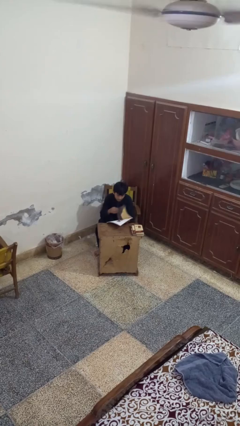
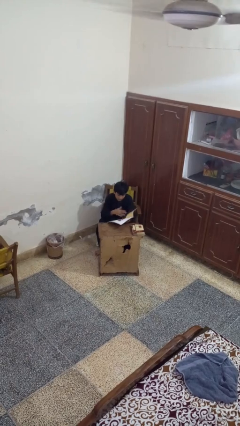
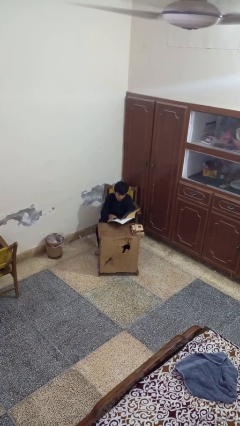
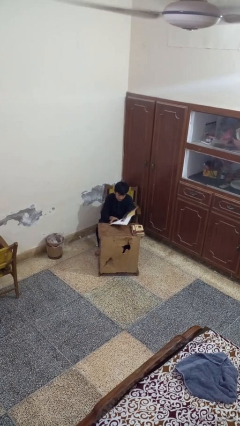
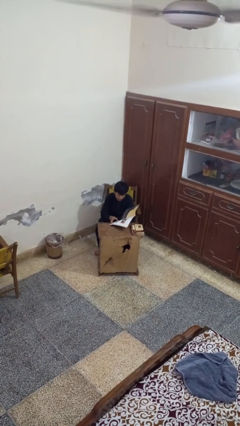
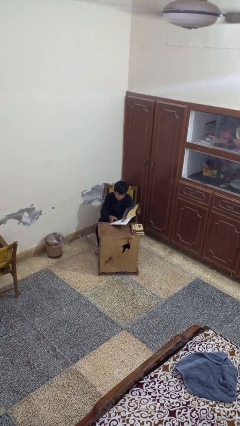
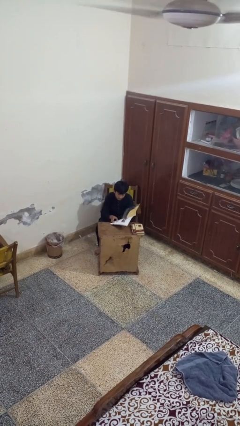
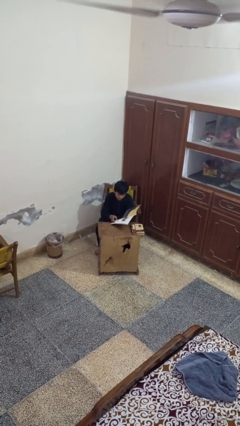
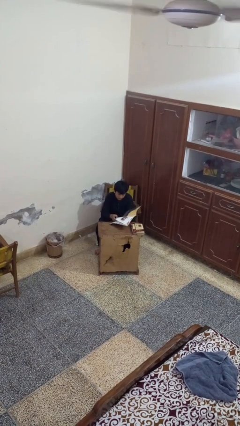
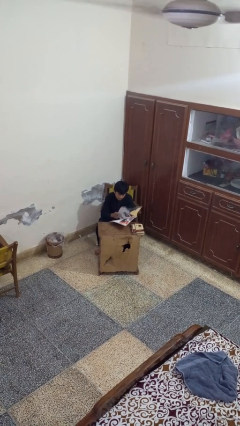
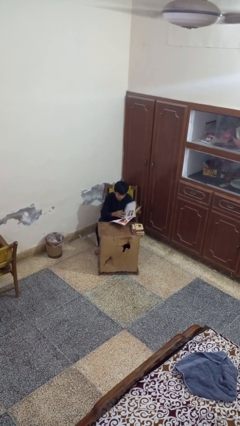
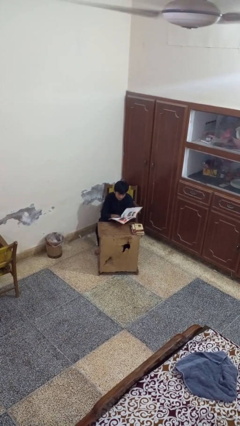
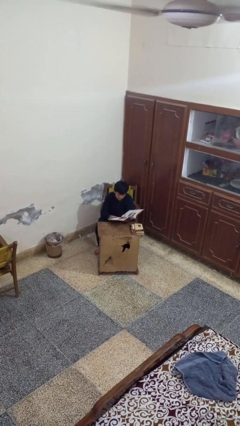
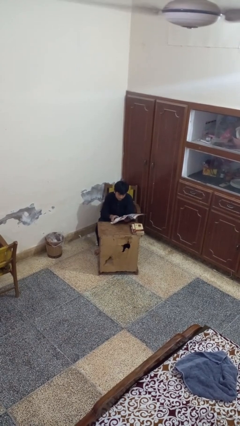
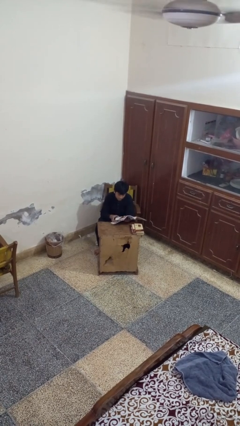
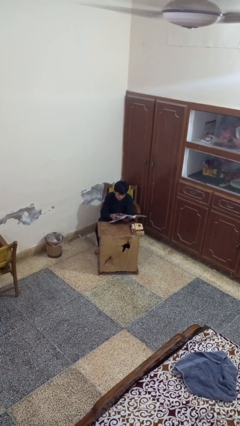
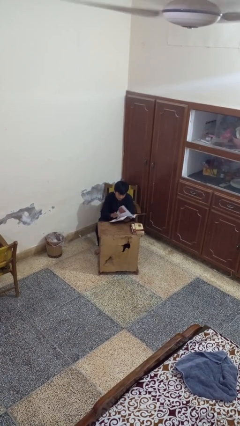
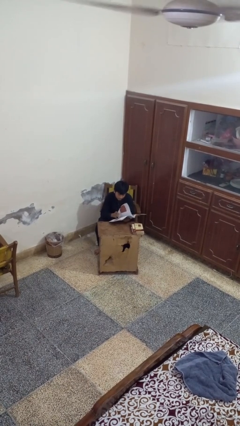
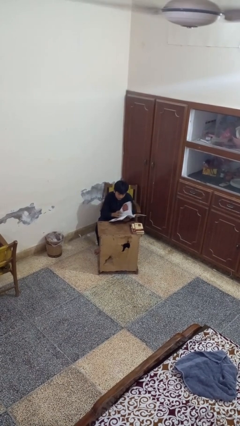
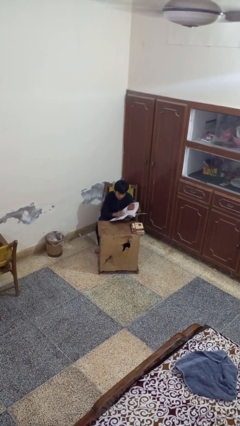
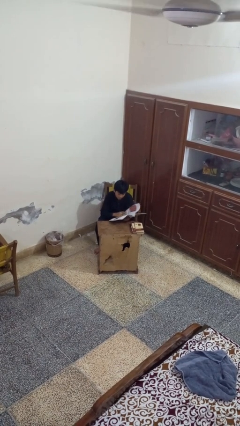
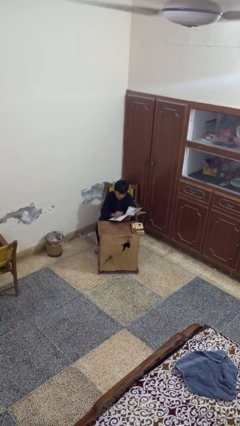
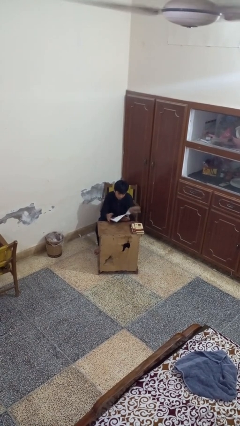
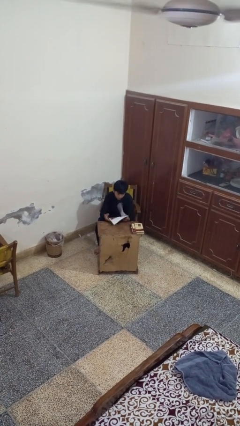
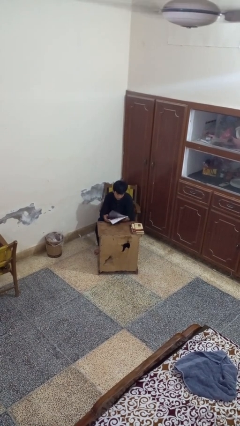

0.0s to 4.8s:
person reads magazine

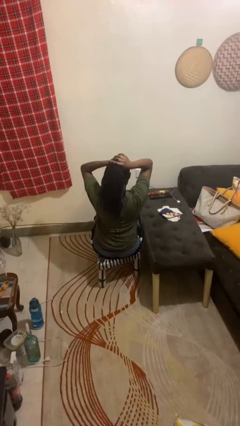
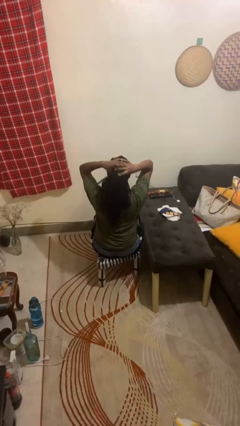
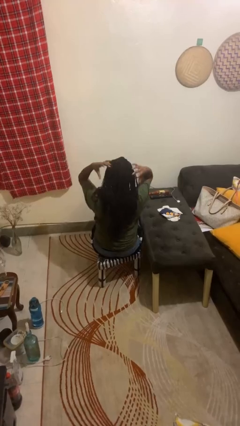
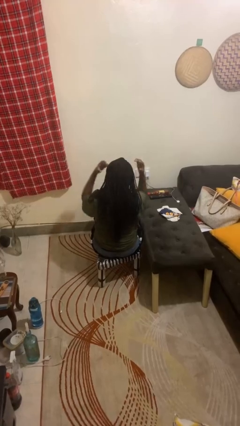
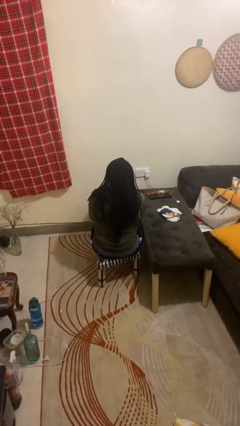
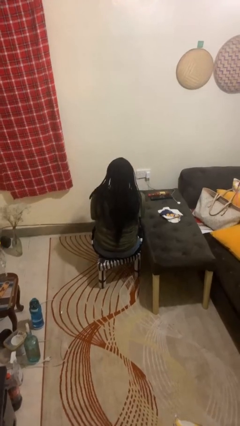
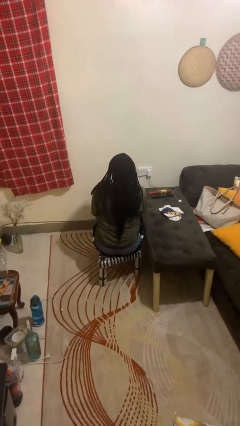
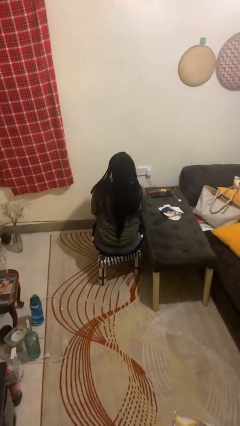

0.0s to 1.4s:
person takes off hairtie

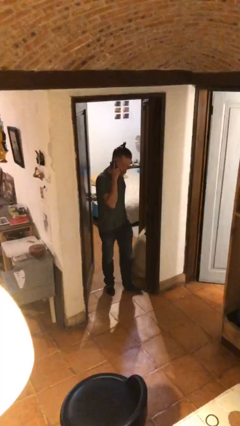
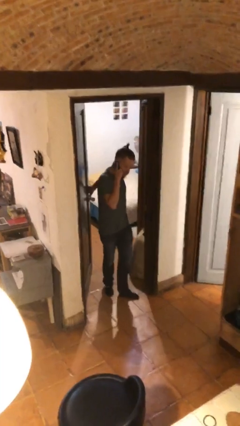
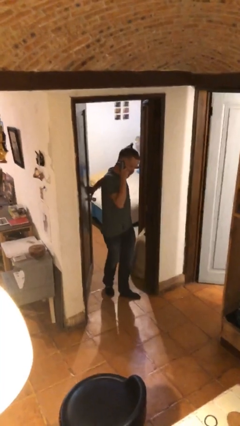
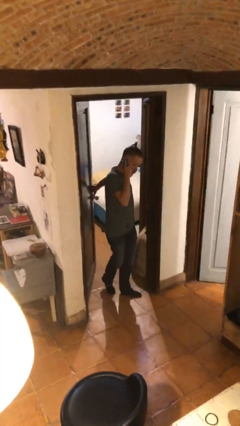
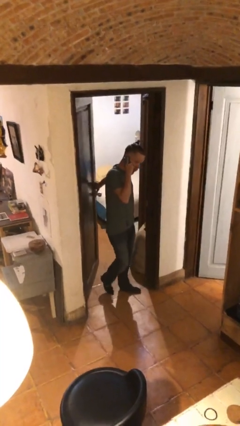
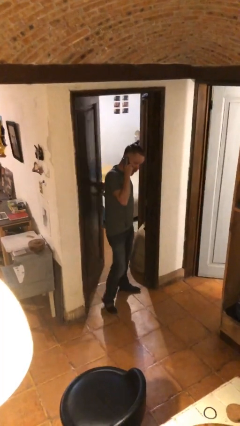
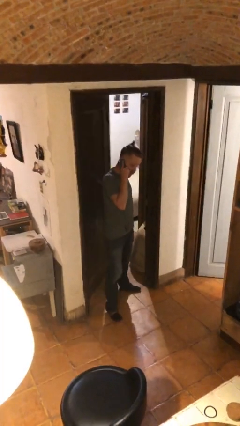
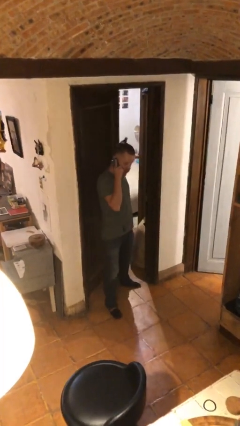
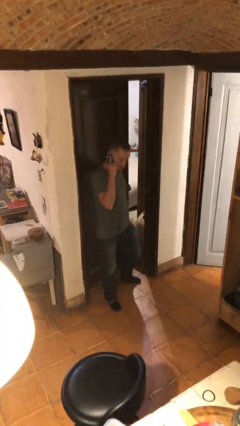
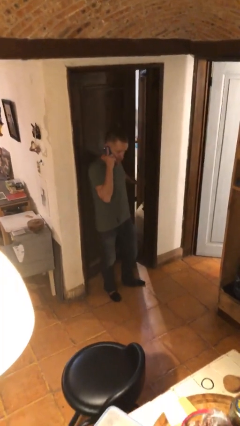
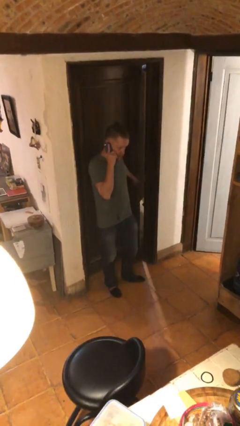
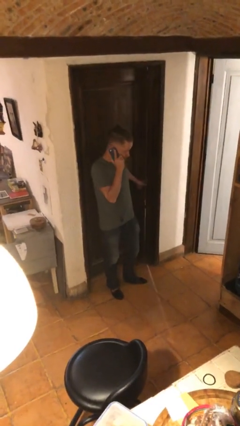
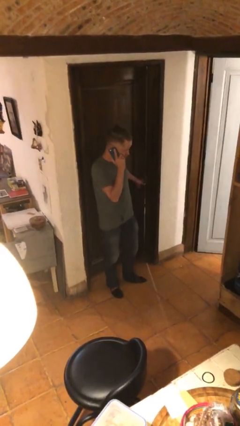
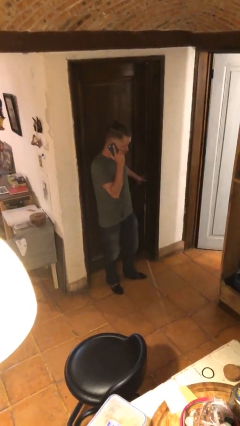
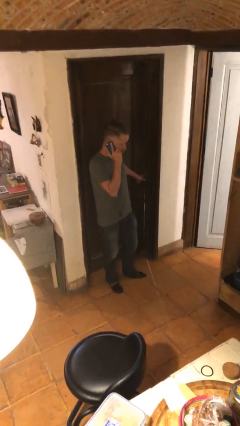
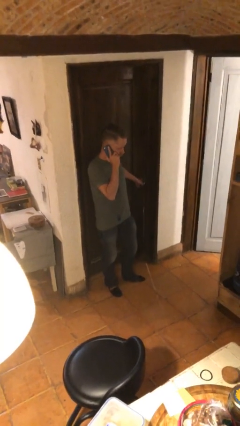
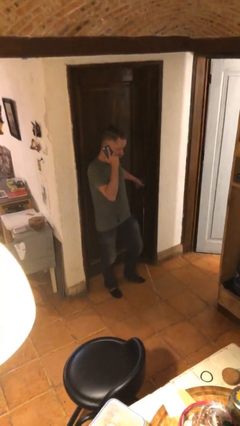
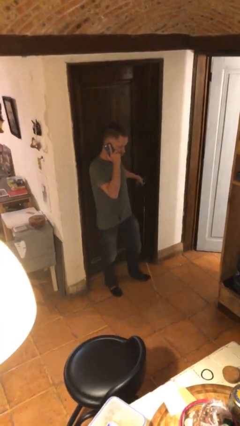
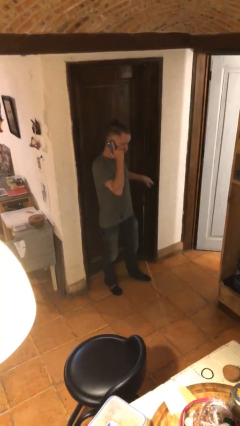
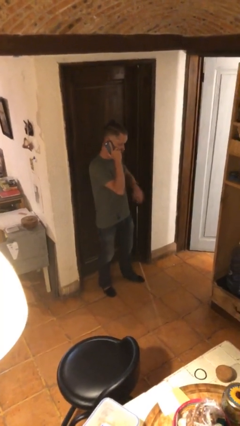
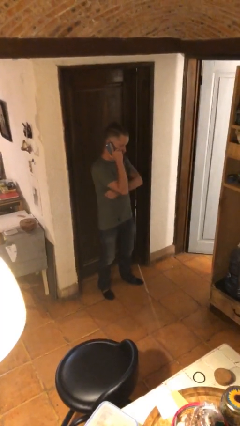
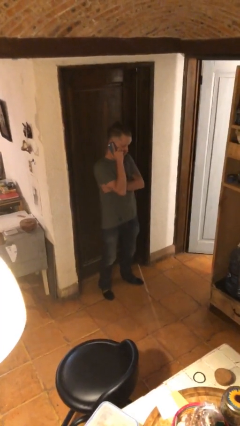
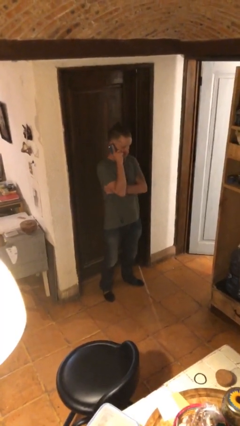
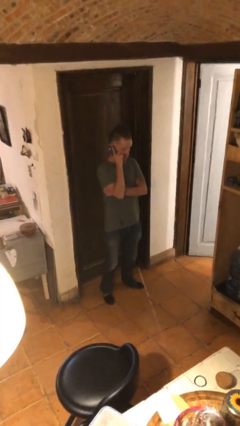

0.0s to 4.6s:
person closes facility door

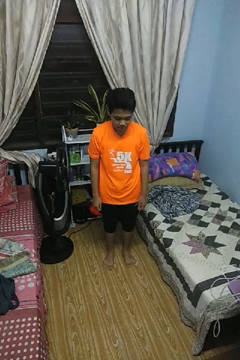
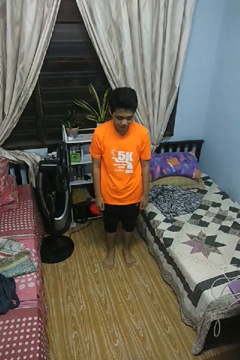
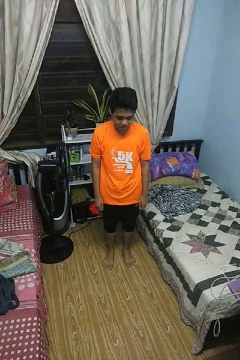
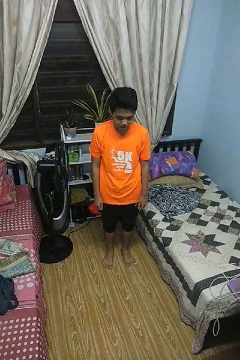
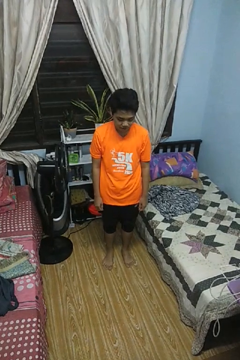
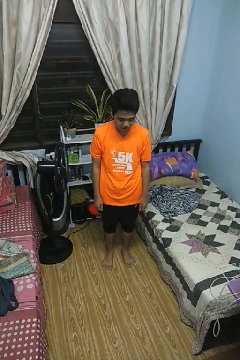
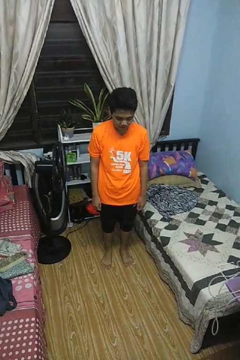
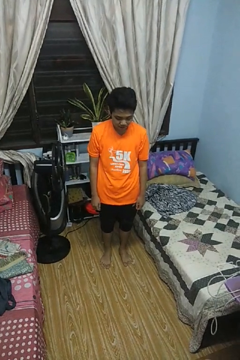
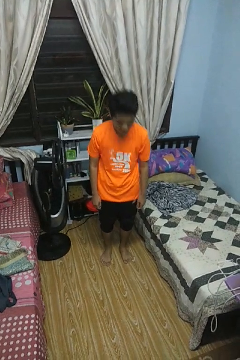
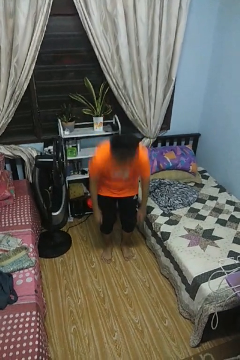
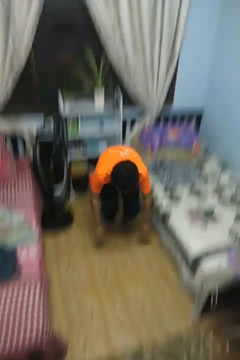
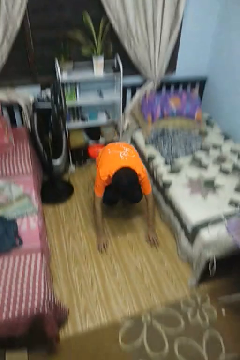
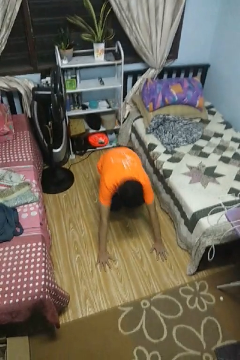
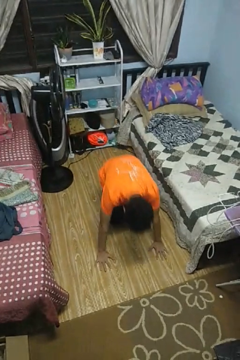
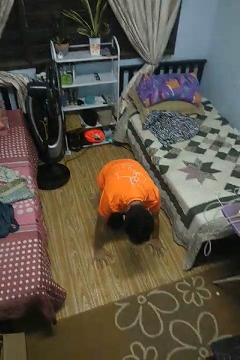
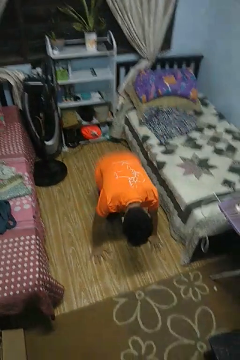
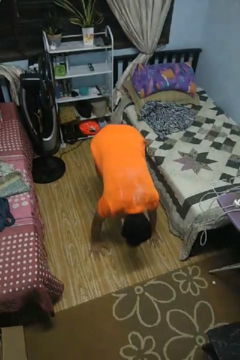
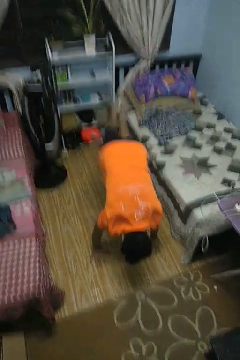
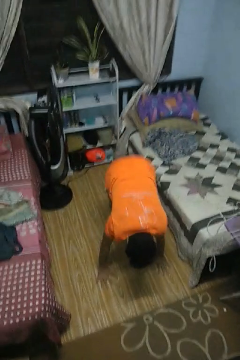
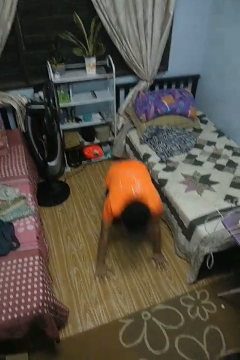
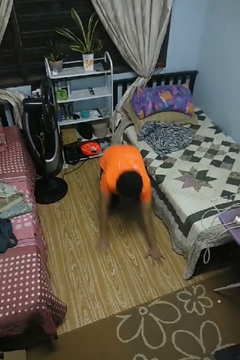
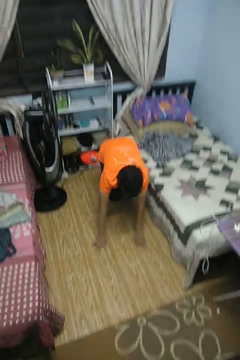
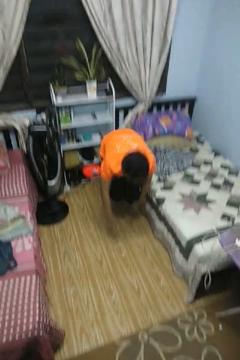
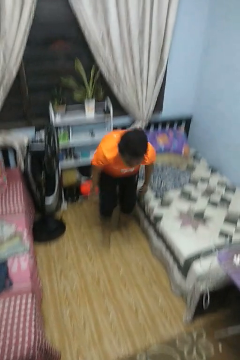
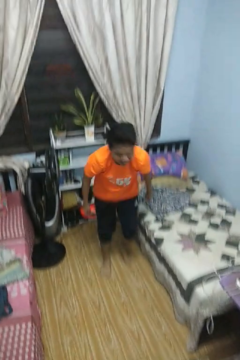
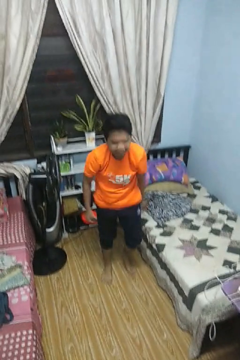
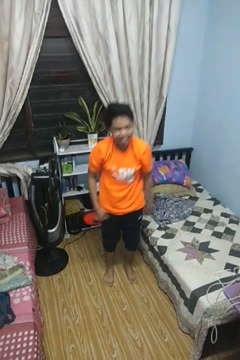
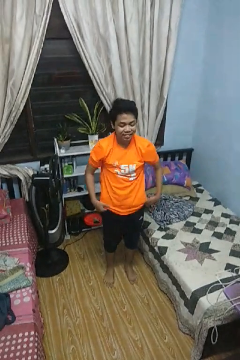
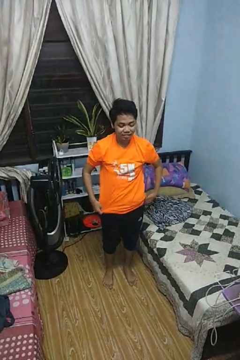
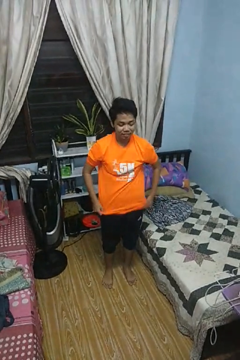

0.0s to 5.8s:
person handstand

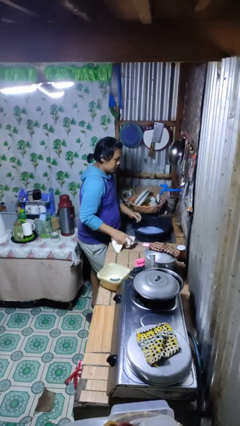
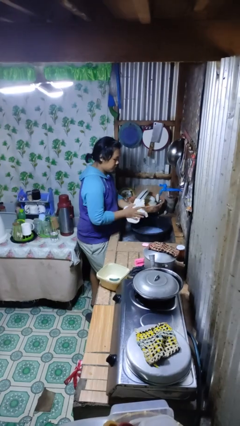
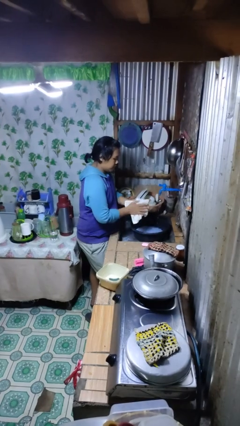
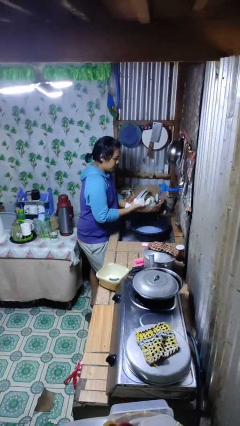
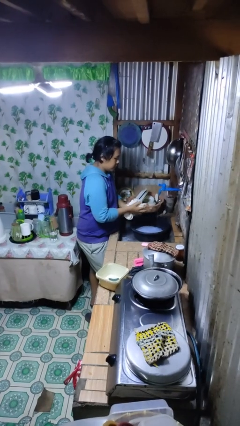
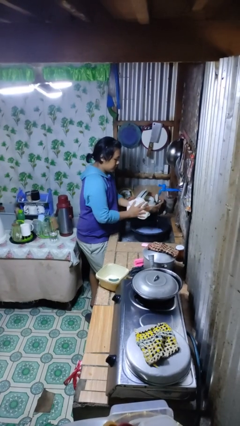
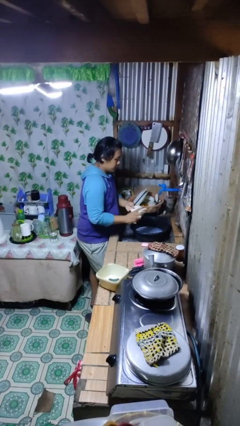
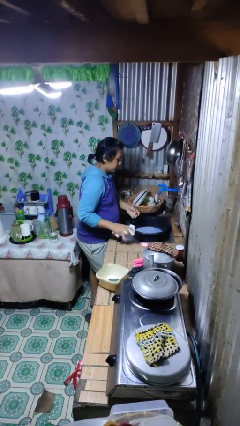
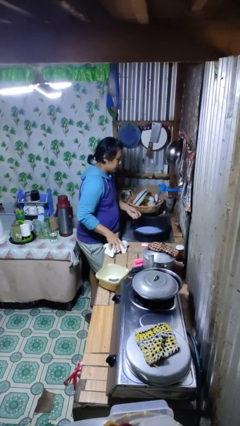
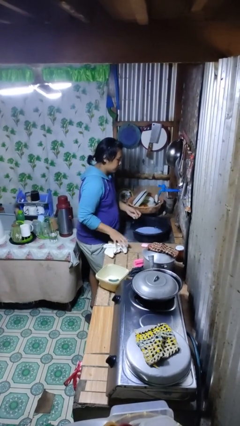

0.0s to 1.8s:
person dries hands with towel
